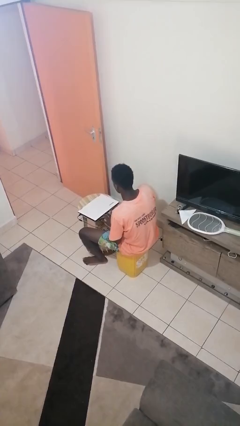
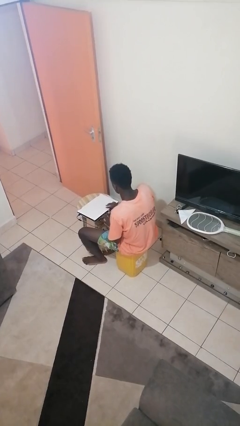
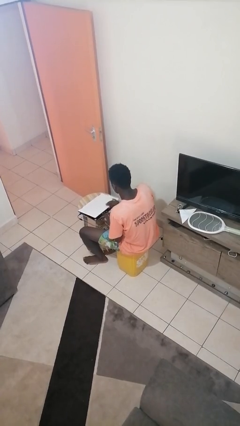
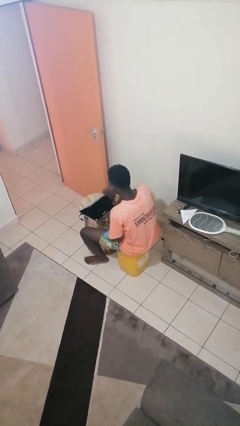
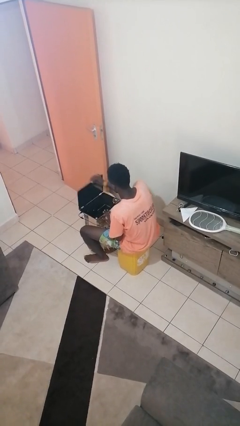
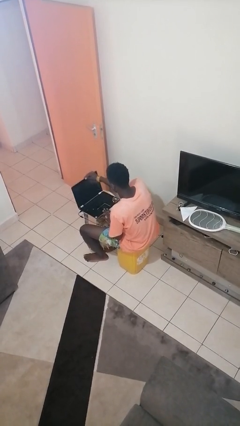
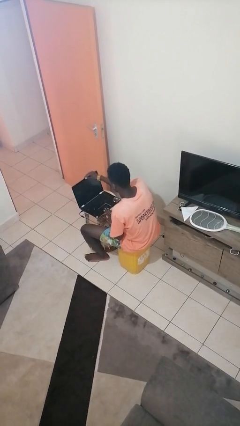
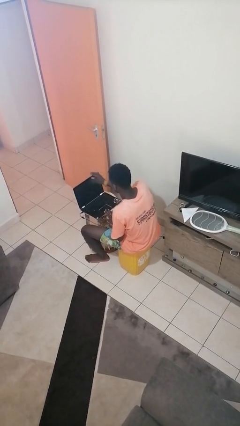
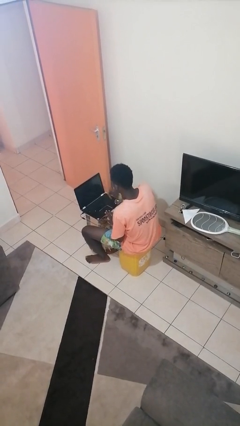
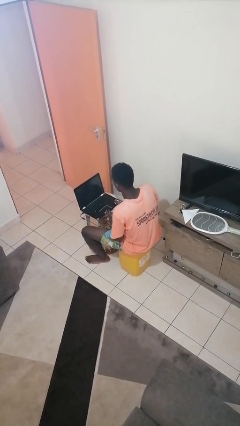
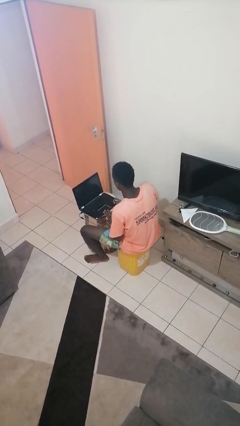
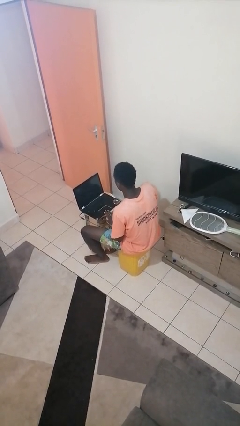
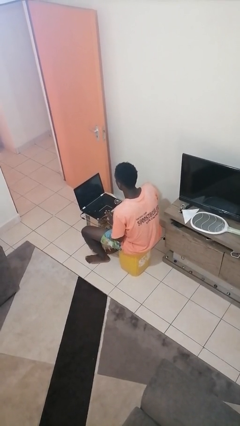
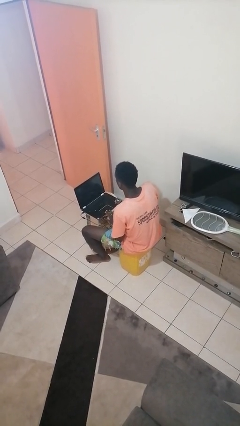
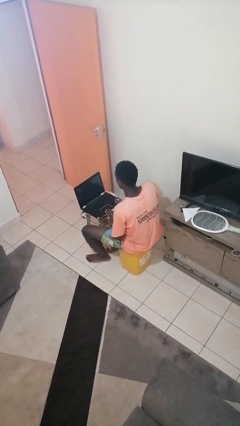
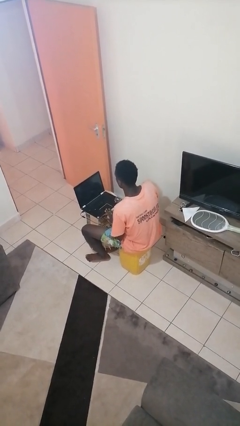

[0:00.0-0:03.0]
person opens laptop

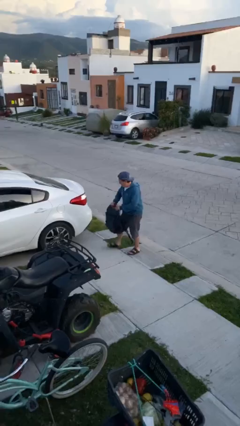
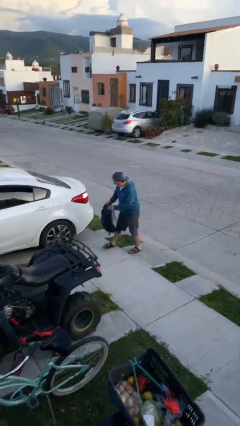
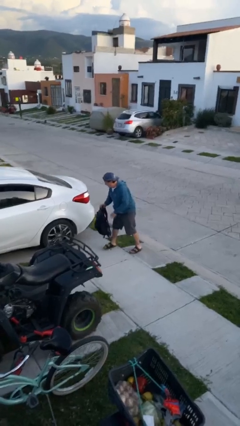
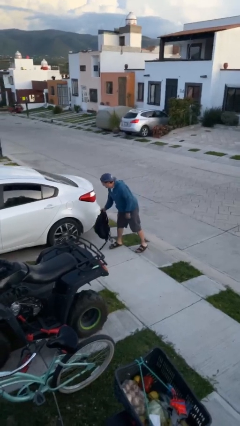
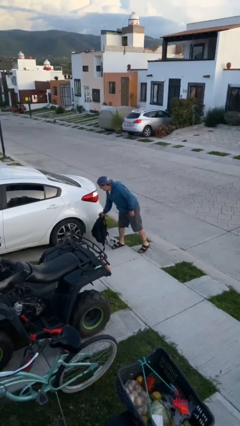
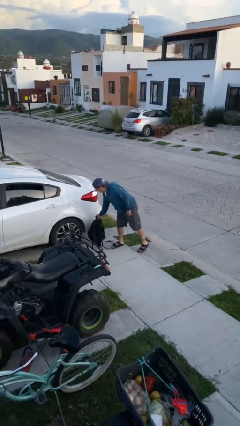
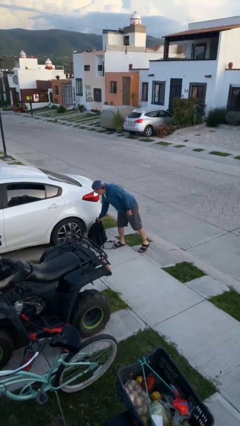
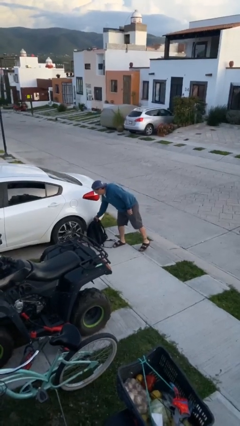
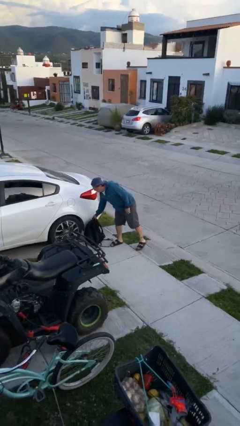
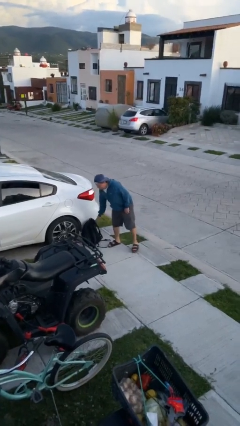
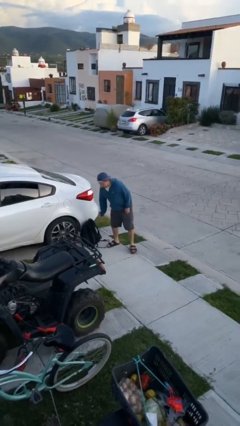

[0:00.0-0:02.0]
person puts down object on floor

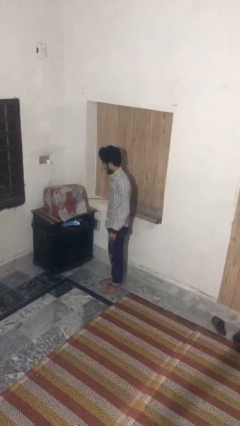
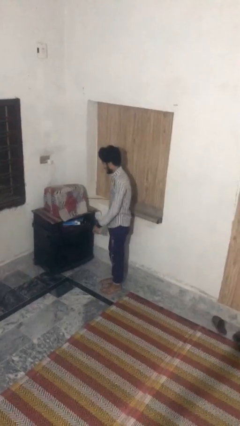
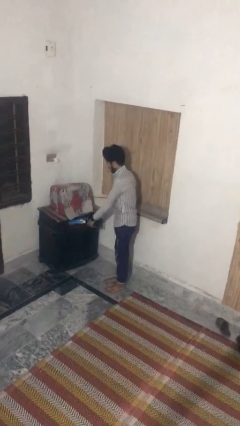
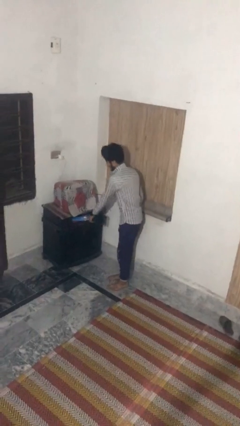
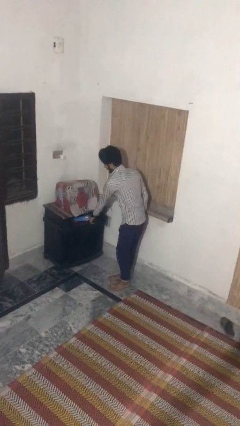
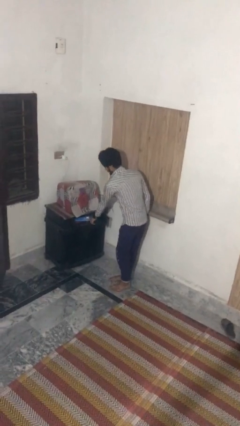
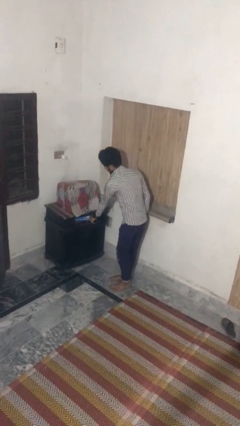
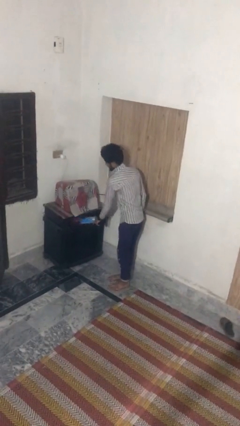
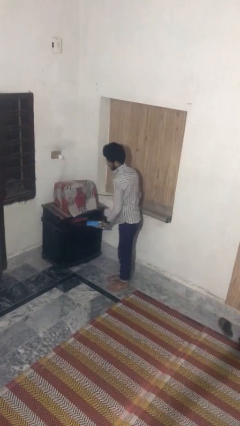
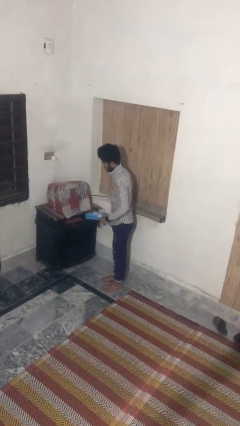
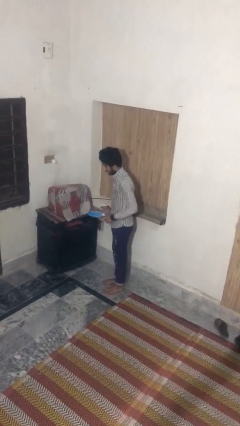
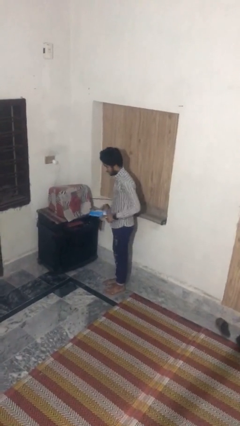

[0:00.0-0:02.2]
person picks up object from cabinet

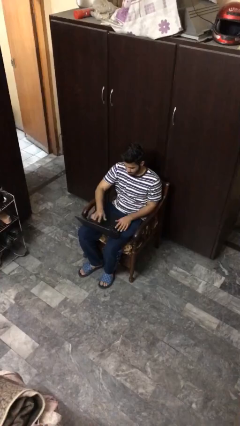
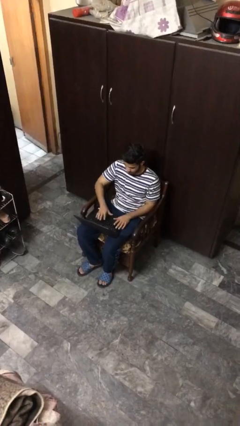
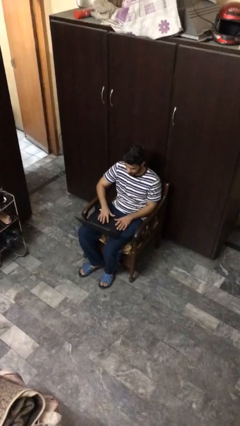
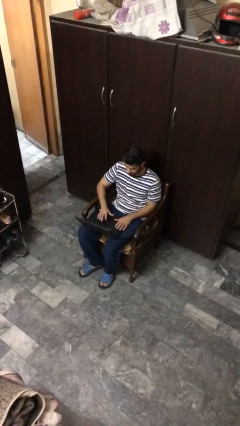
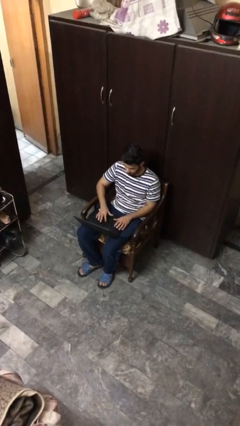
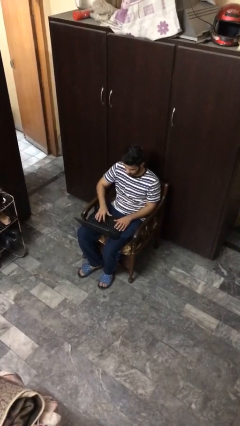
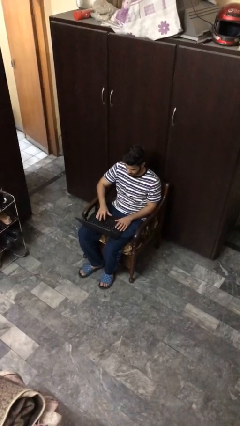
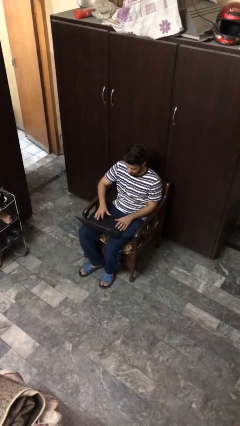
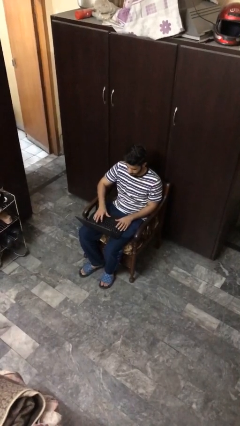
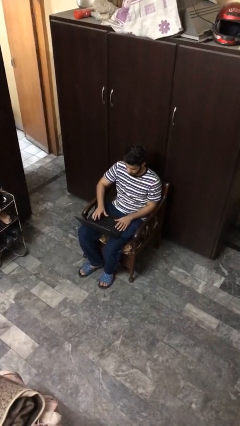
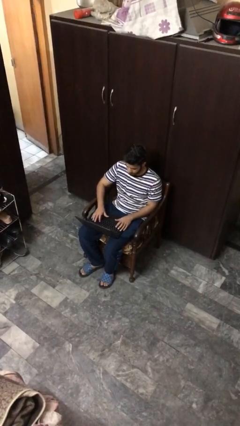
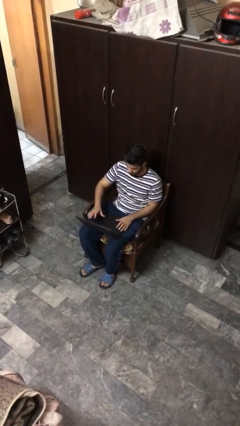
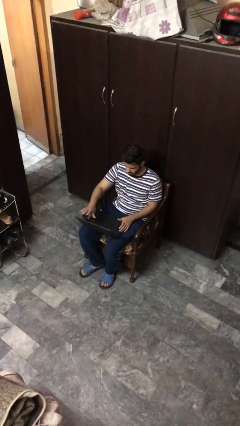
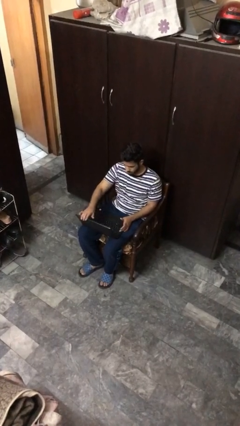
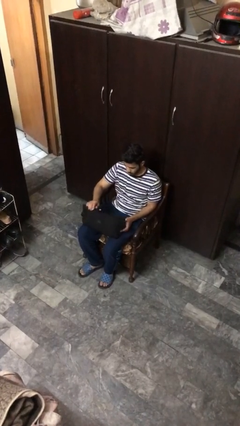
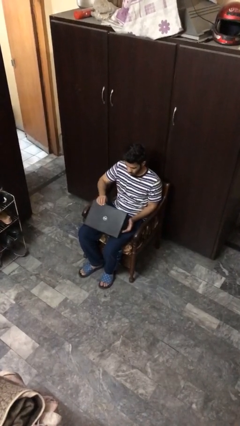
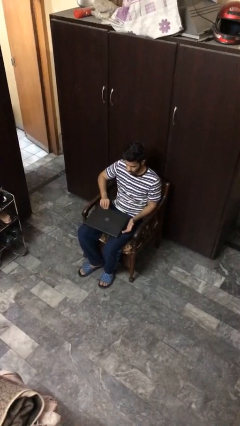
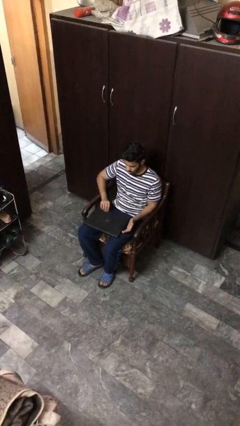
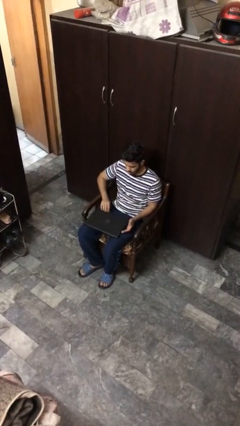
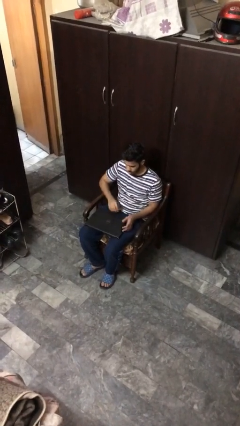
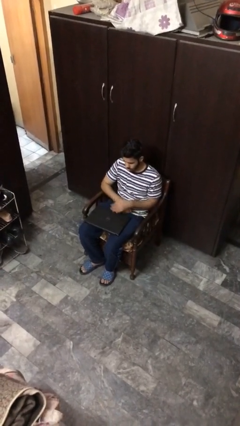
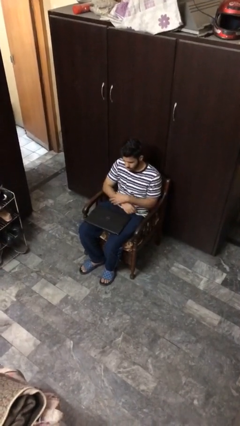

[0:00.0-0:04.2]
person interacts with laptop

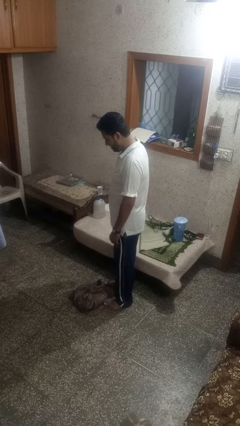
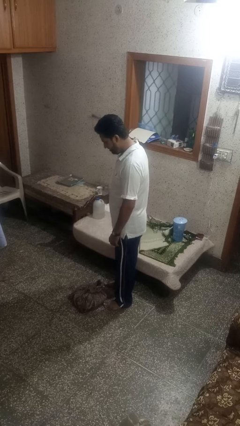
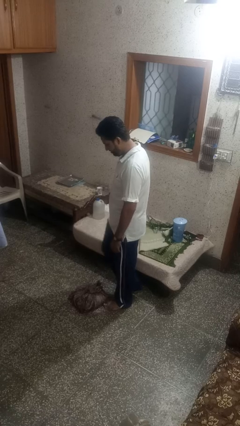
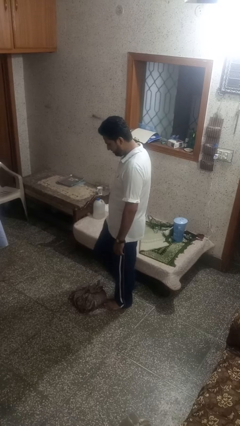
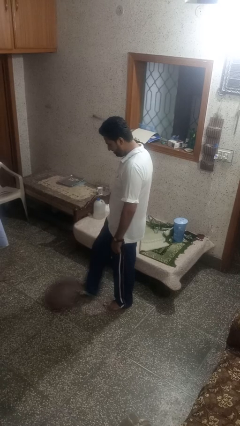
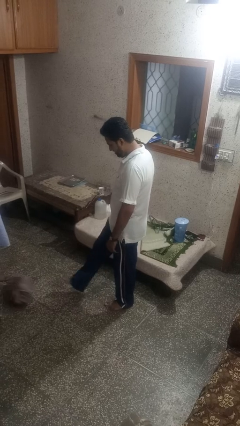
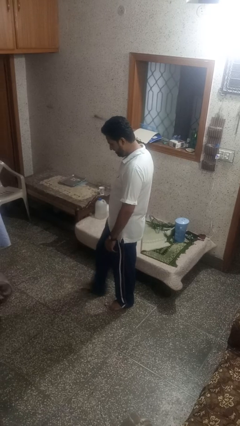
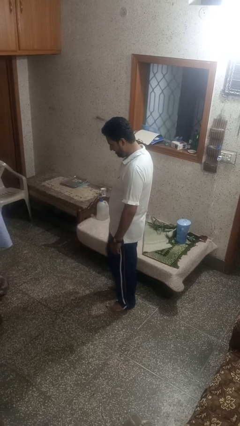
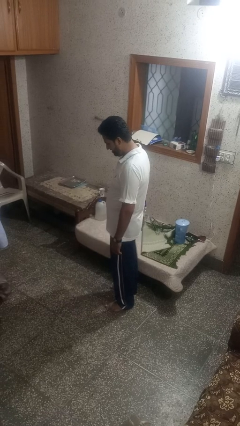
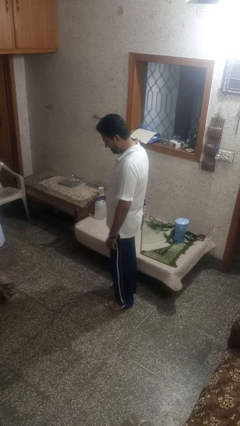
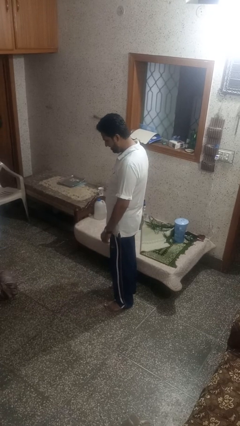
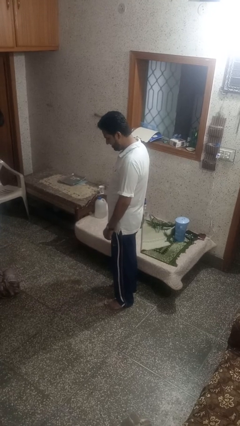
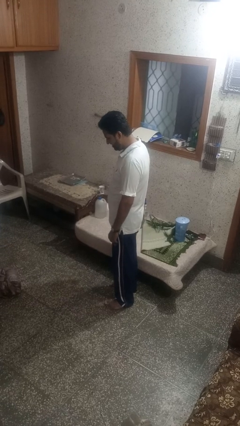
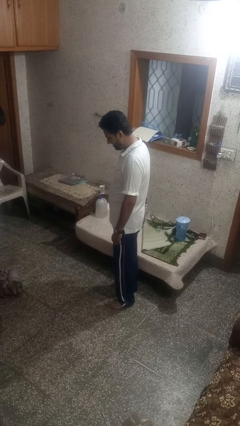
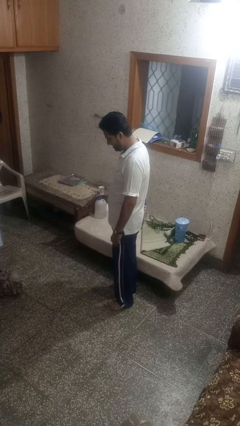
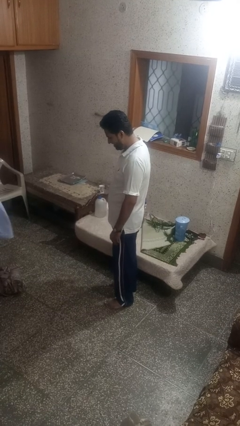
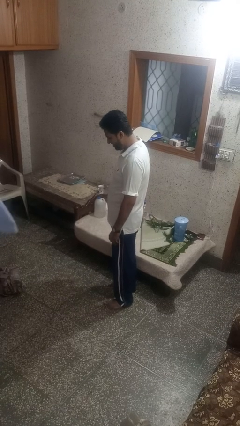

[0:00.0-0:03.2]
person kicks object to person

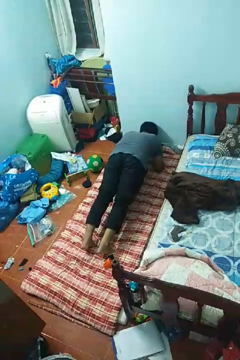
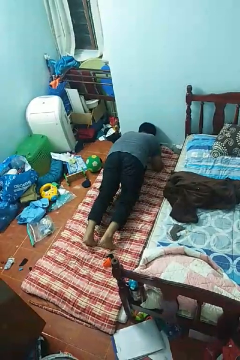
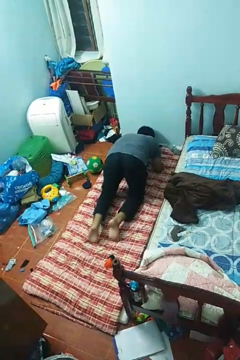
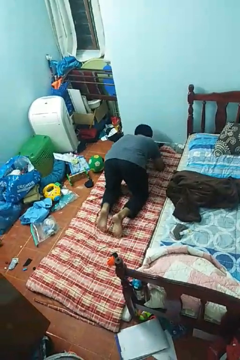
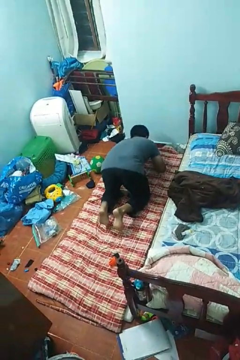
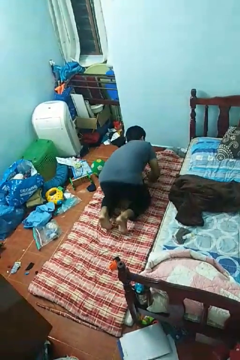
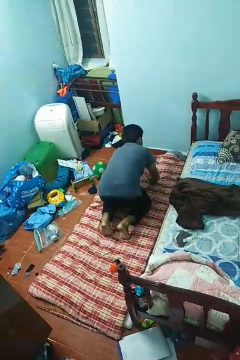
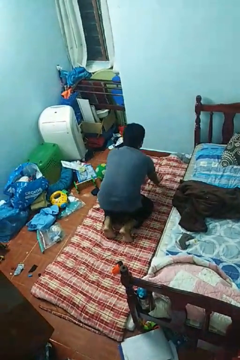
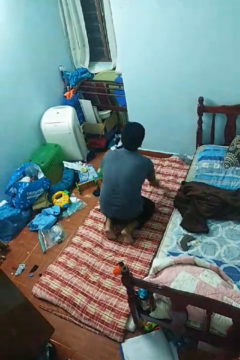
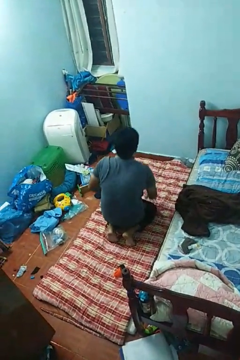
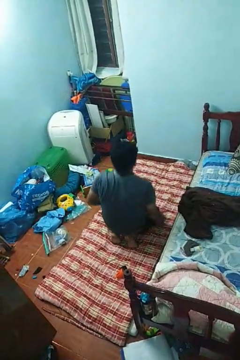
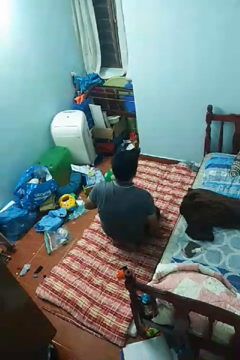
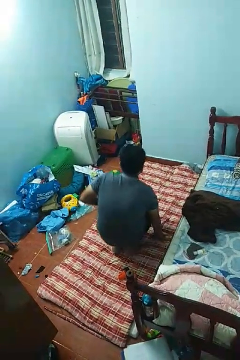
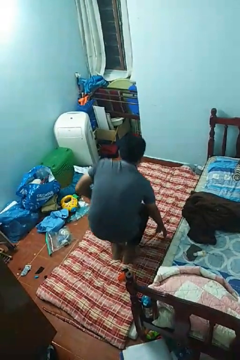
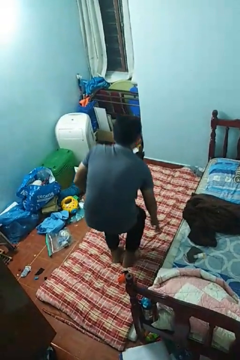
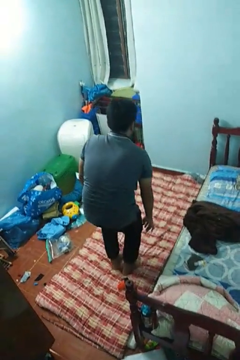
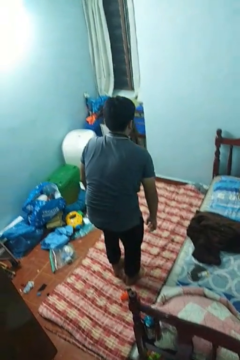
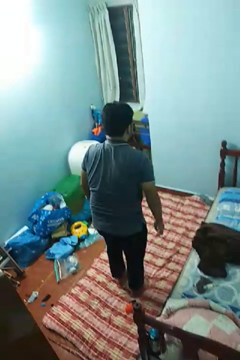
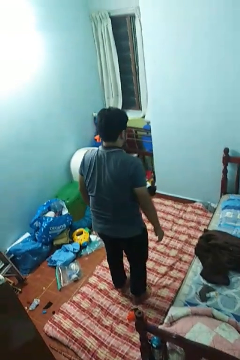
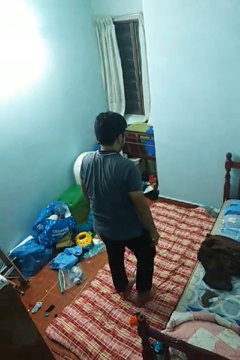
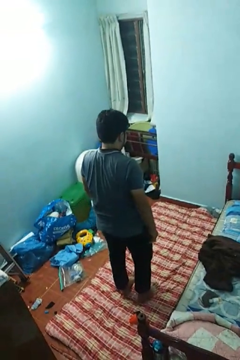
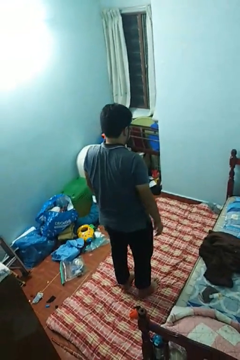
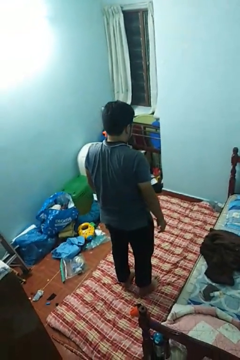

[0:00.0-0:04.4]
person stands up from floor
